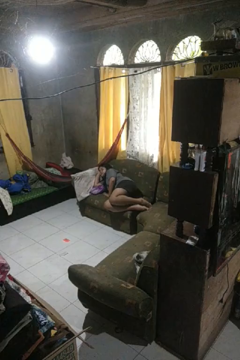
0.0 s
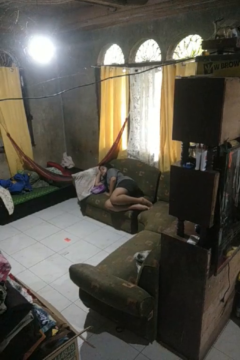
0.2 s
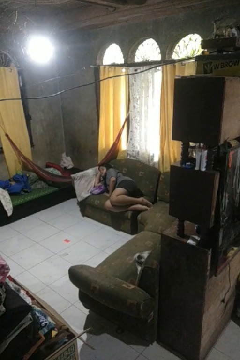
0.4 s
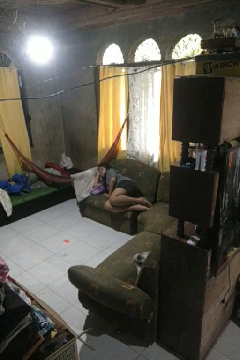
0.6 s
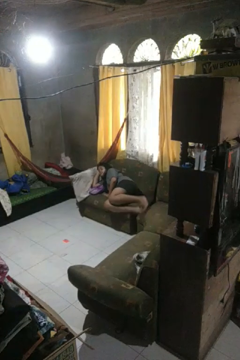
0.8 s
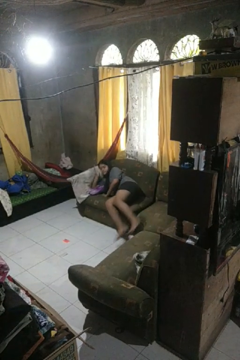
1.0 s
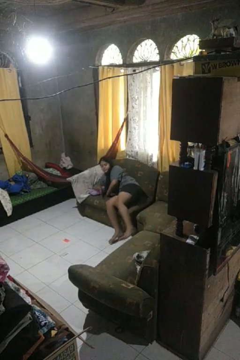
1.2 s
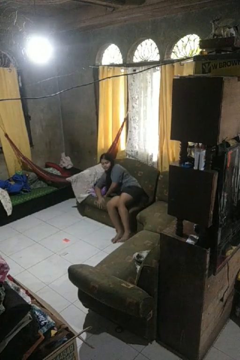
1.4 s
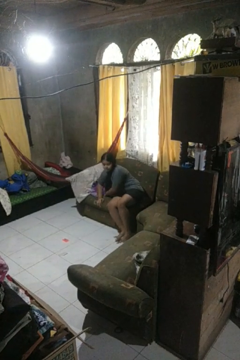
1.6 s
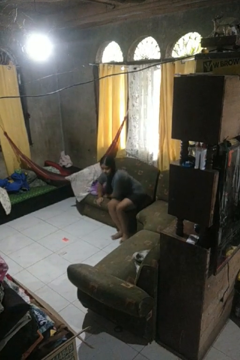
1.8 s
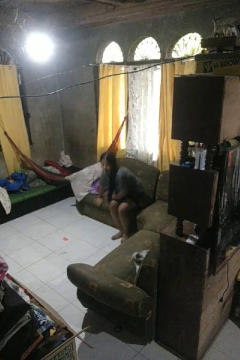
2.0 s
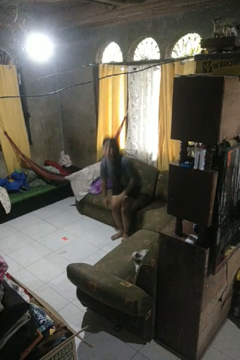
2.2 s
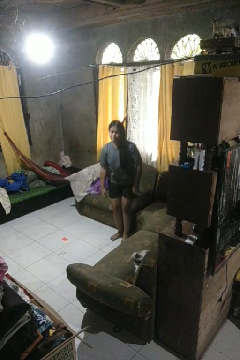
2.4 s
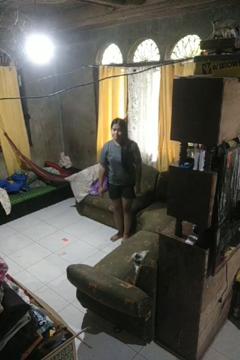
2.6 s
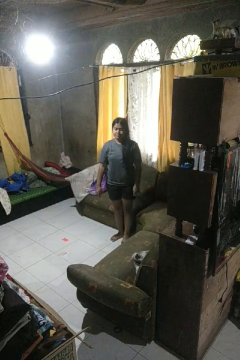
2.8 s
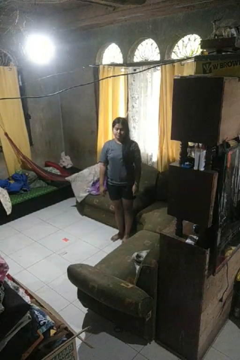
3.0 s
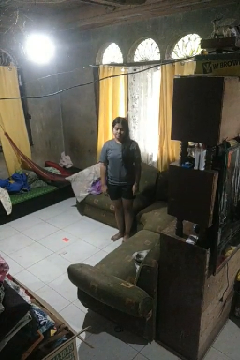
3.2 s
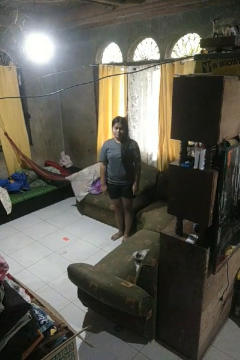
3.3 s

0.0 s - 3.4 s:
person stands up

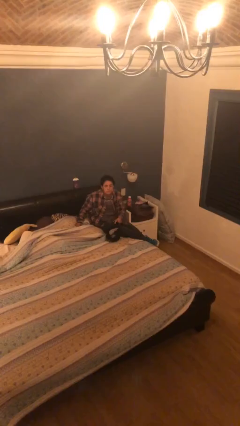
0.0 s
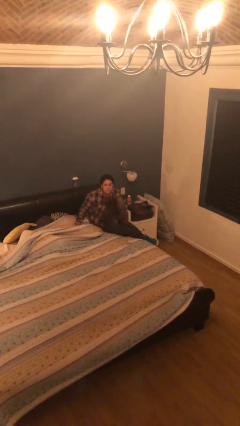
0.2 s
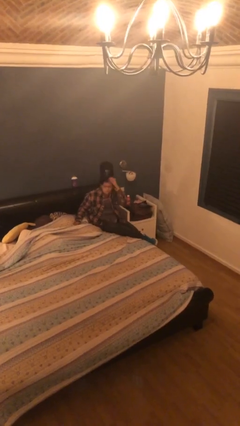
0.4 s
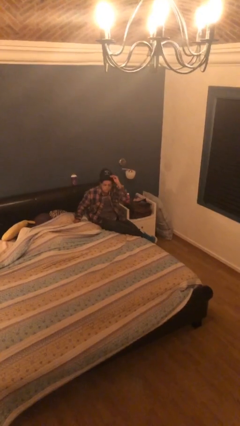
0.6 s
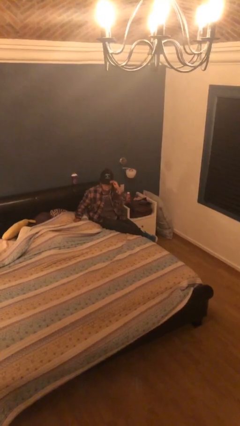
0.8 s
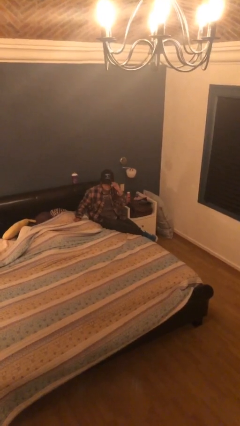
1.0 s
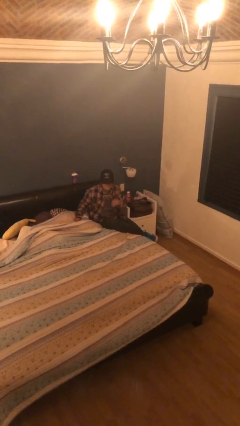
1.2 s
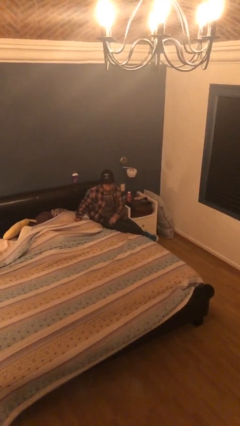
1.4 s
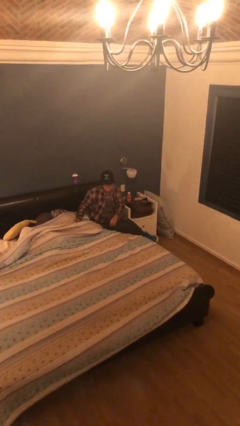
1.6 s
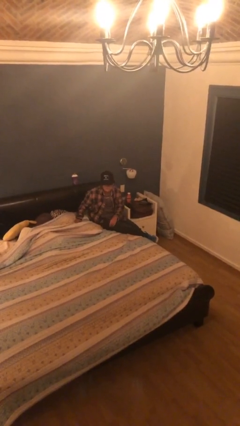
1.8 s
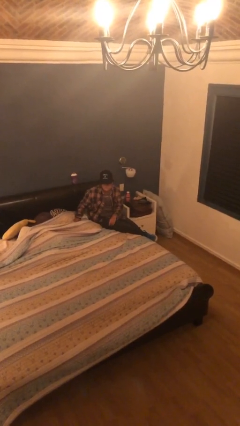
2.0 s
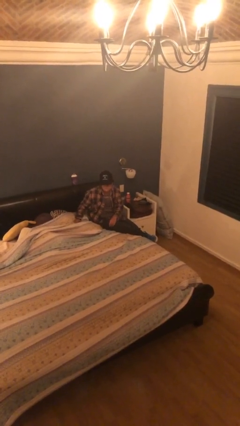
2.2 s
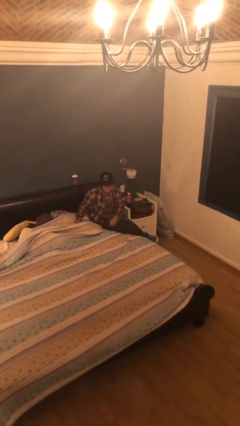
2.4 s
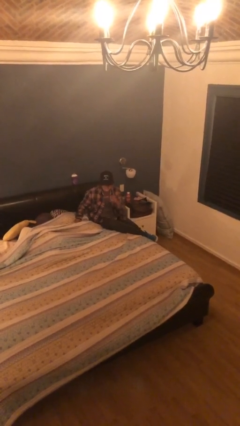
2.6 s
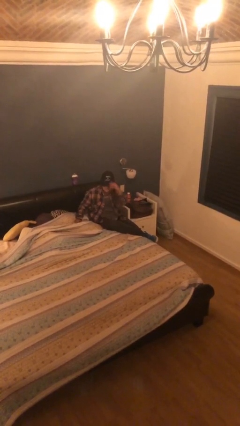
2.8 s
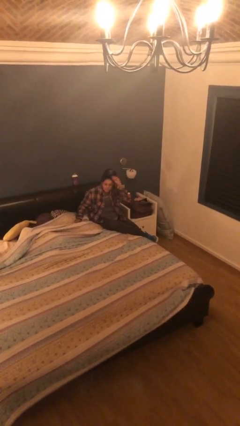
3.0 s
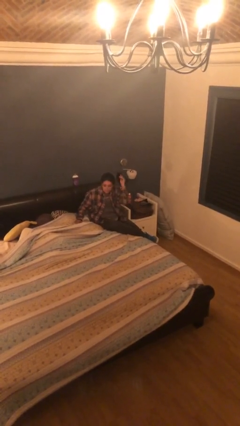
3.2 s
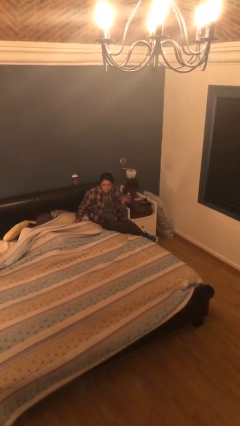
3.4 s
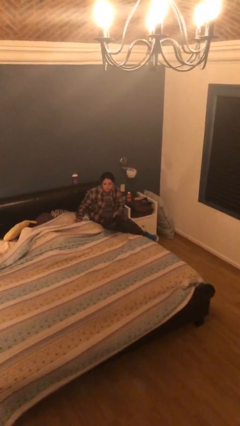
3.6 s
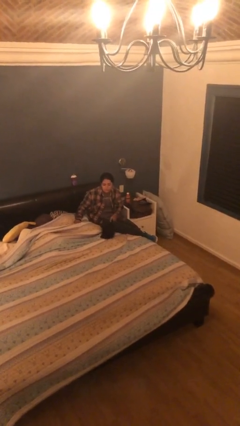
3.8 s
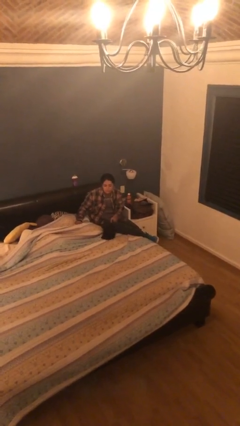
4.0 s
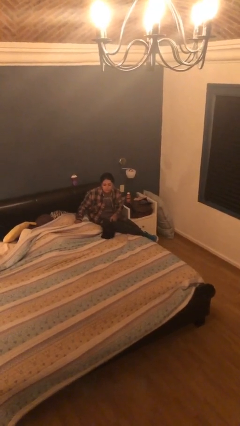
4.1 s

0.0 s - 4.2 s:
person puts on hat

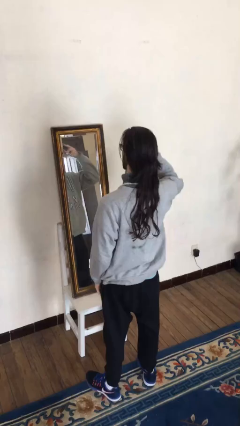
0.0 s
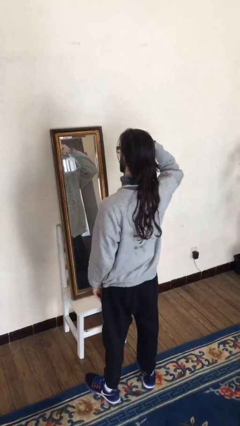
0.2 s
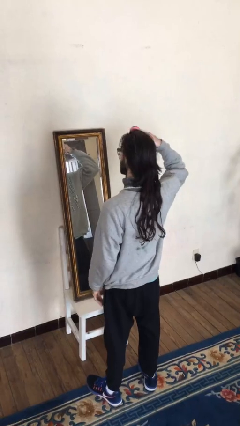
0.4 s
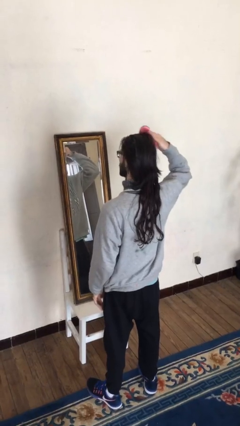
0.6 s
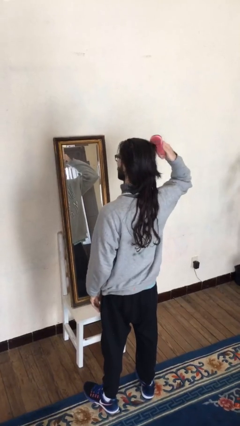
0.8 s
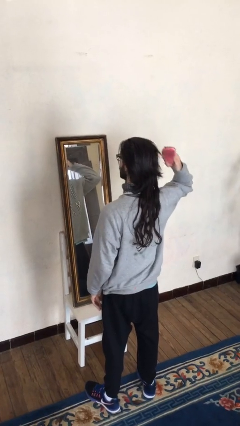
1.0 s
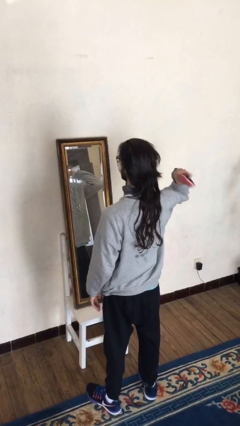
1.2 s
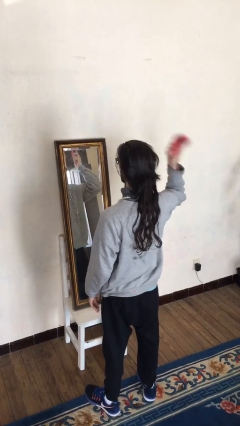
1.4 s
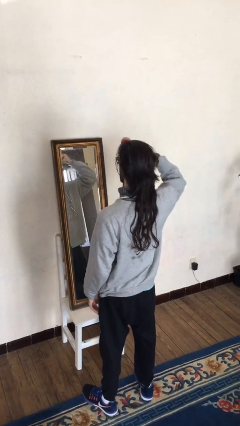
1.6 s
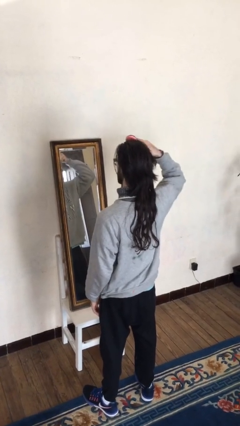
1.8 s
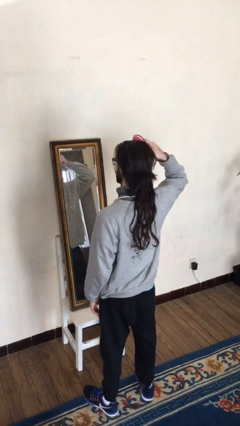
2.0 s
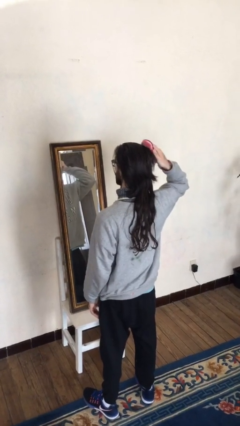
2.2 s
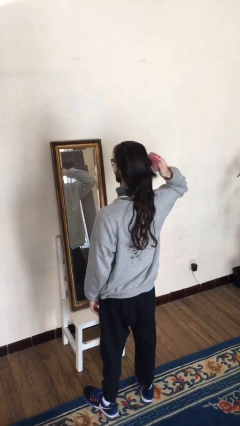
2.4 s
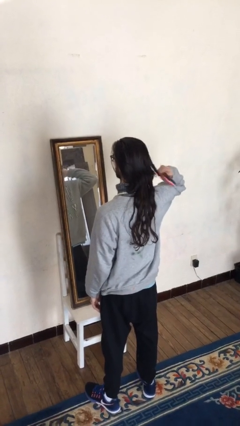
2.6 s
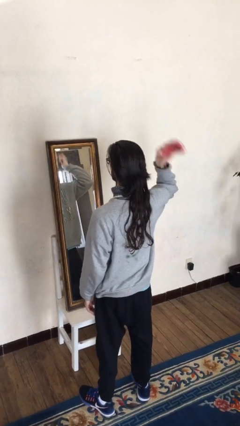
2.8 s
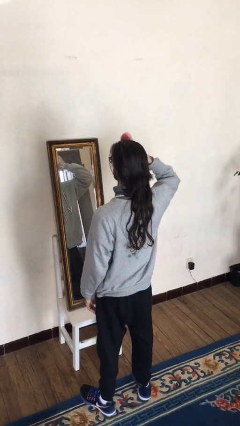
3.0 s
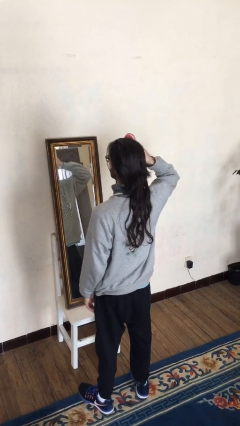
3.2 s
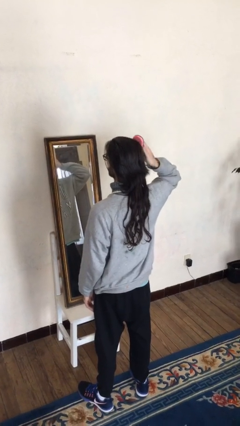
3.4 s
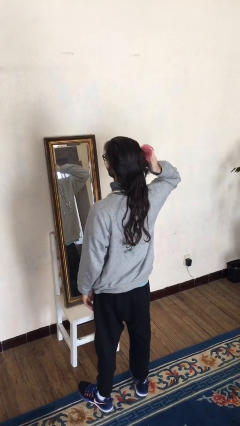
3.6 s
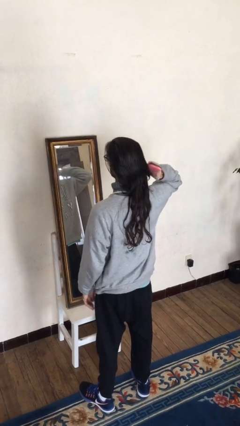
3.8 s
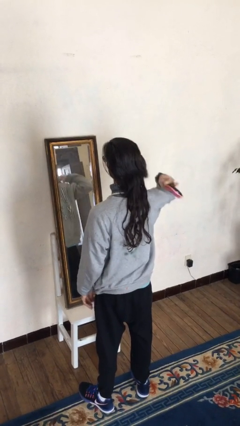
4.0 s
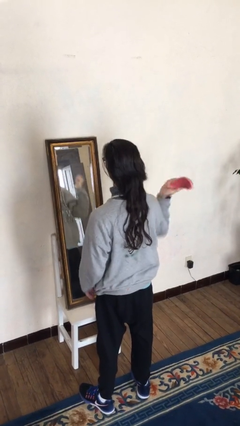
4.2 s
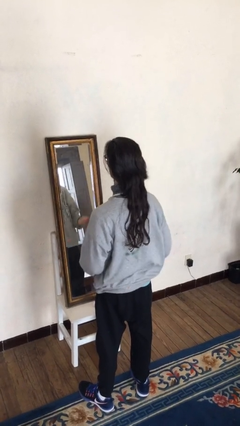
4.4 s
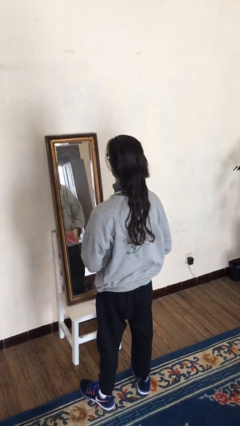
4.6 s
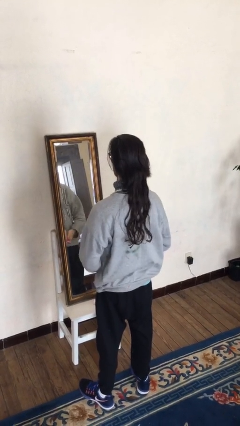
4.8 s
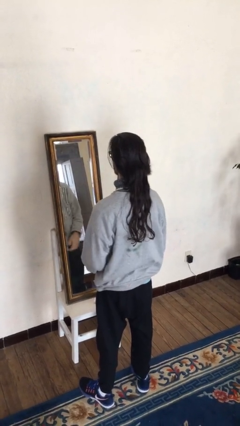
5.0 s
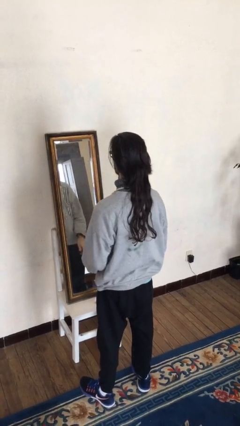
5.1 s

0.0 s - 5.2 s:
person brushes hair

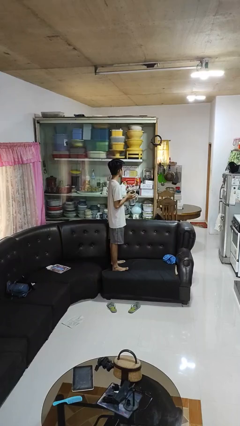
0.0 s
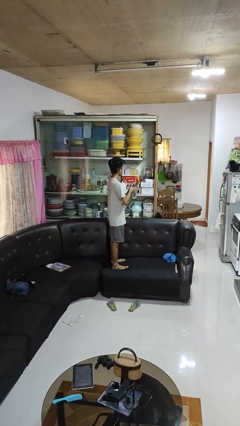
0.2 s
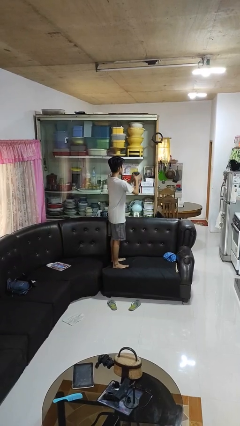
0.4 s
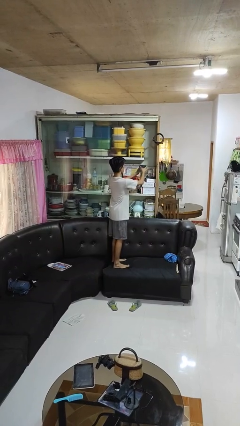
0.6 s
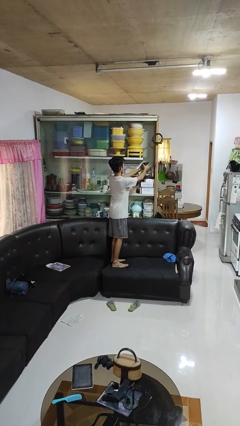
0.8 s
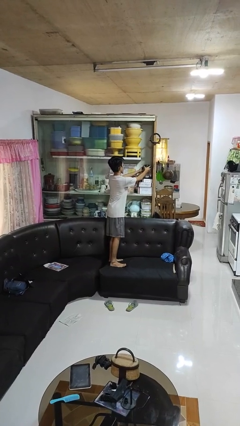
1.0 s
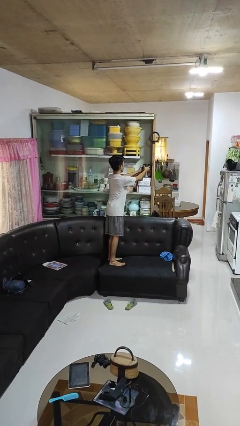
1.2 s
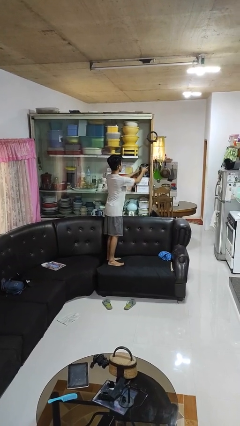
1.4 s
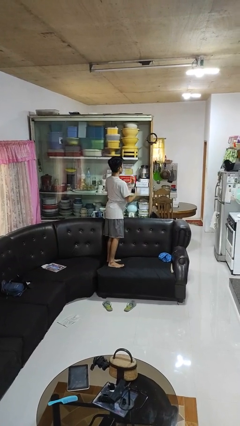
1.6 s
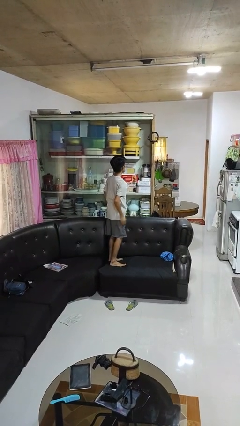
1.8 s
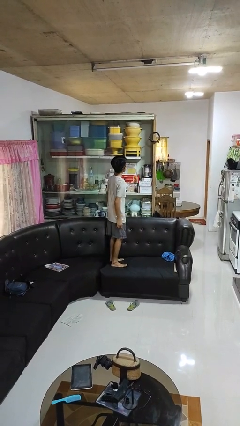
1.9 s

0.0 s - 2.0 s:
person puts down object into cabinet

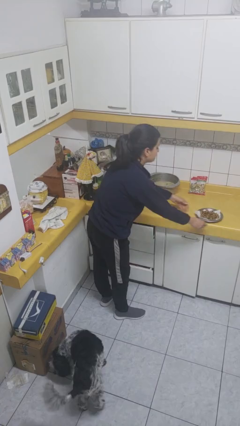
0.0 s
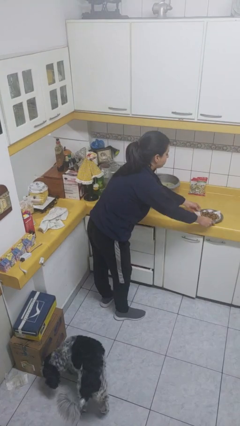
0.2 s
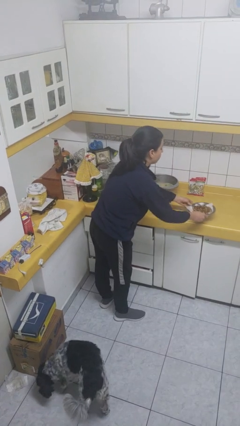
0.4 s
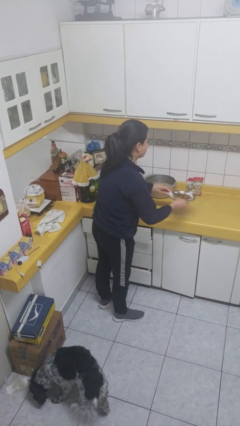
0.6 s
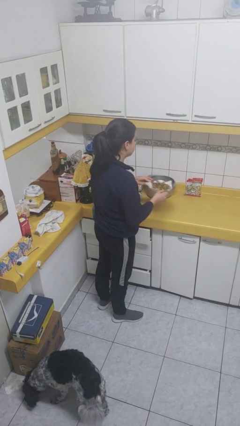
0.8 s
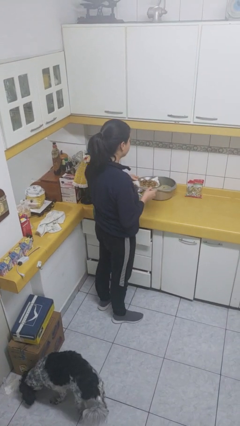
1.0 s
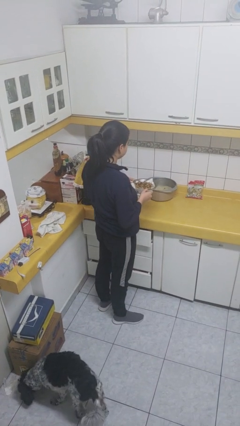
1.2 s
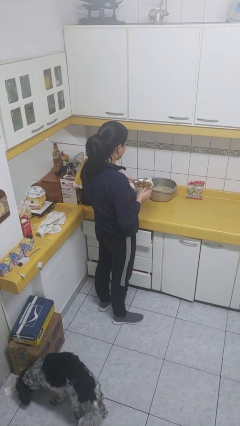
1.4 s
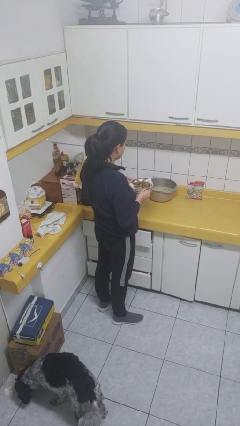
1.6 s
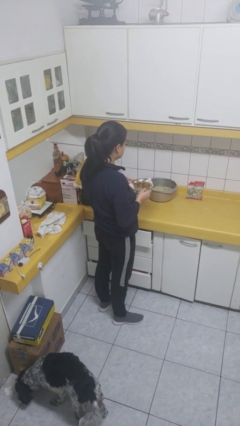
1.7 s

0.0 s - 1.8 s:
person picks up object from countertop

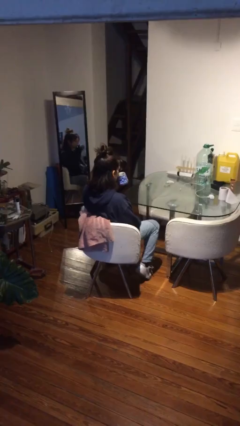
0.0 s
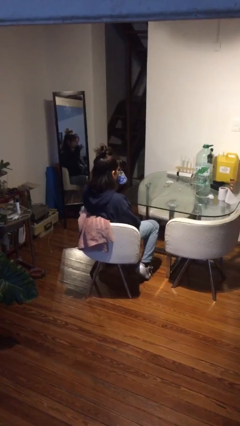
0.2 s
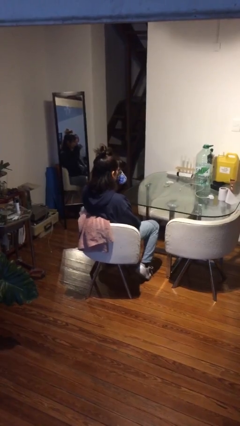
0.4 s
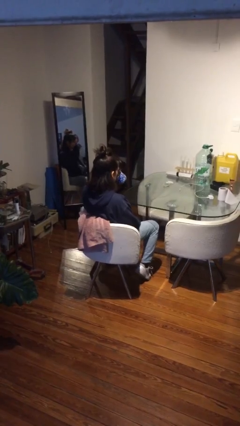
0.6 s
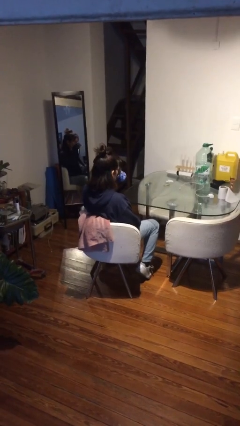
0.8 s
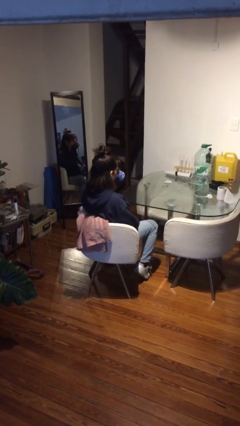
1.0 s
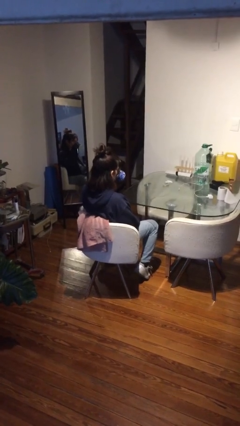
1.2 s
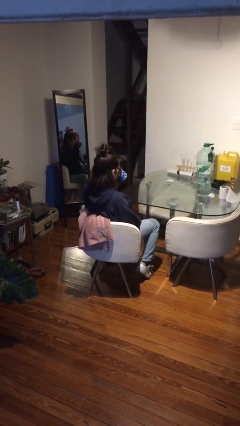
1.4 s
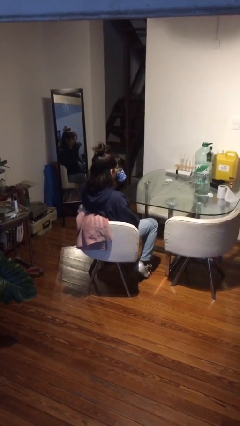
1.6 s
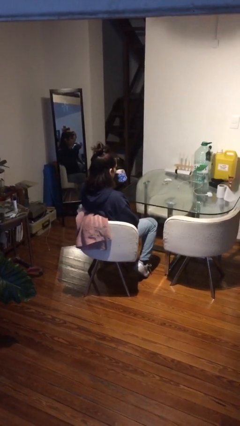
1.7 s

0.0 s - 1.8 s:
person drinks from mug
